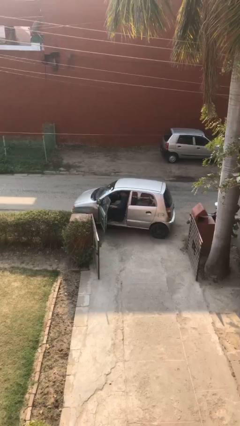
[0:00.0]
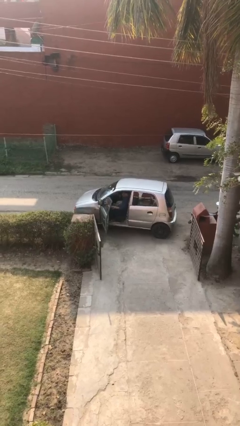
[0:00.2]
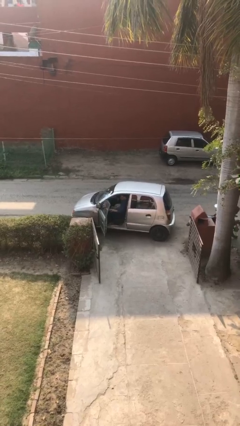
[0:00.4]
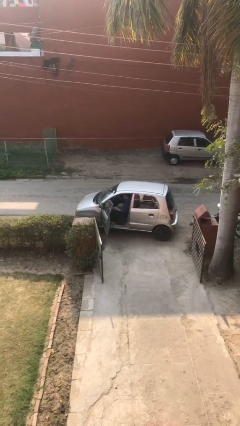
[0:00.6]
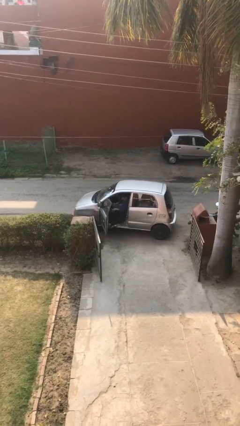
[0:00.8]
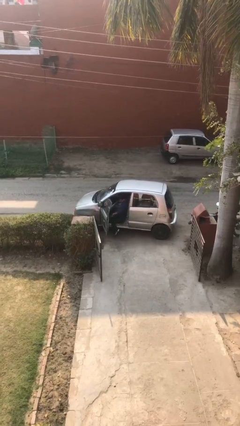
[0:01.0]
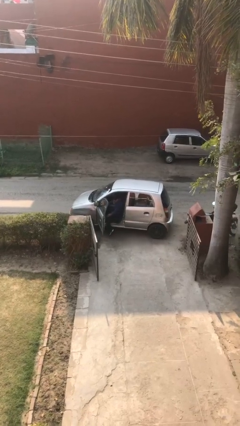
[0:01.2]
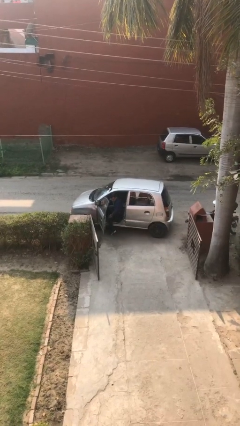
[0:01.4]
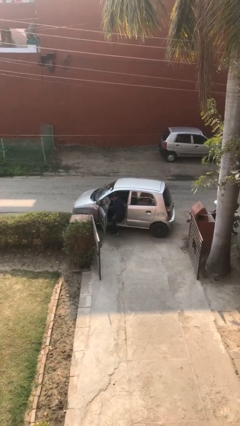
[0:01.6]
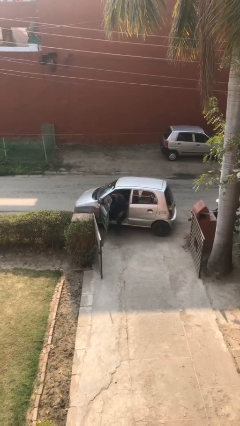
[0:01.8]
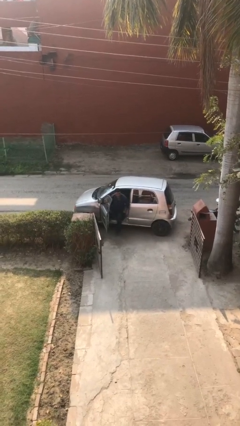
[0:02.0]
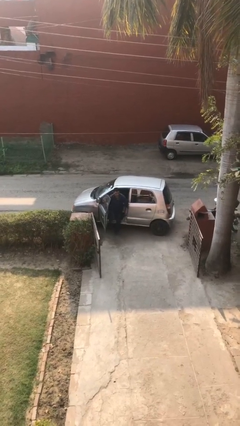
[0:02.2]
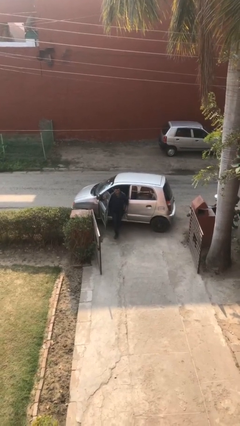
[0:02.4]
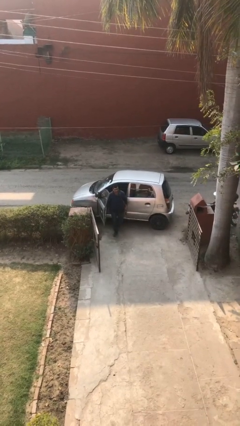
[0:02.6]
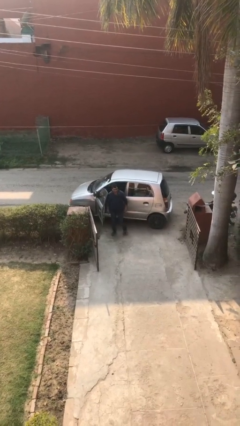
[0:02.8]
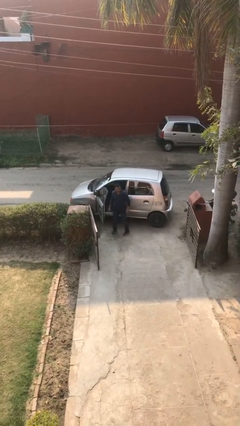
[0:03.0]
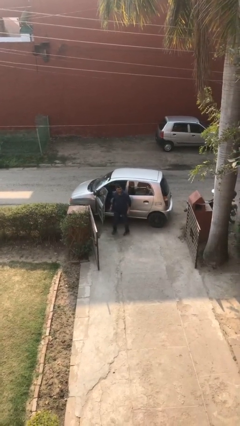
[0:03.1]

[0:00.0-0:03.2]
person exits car

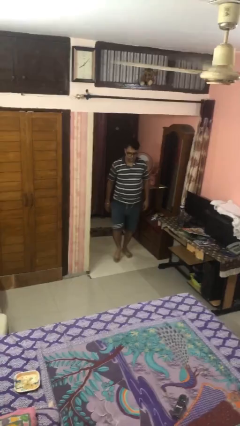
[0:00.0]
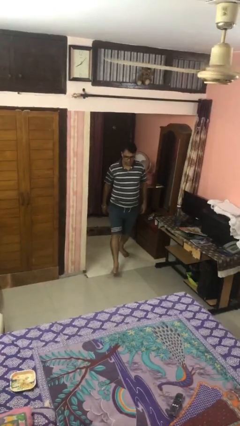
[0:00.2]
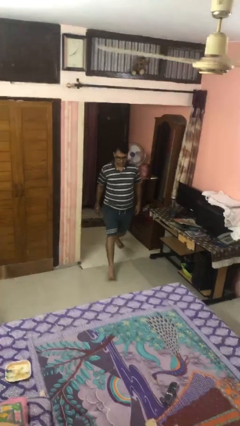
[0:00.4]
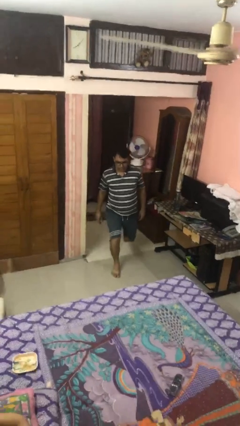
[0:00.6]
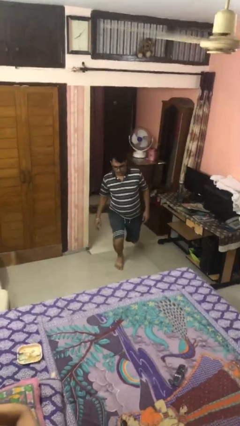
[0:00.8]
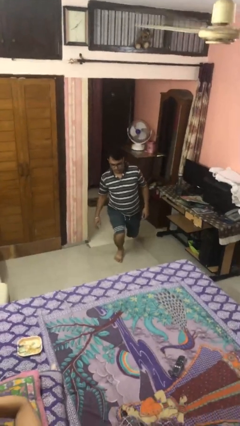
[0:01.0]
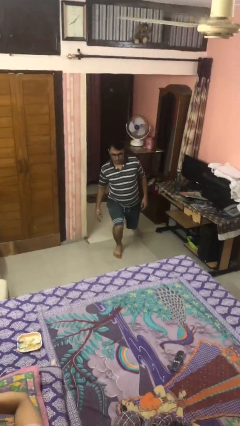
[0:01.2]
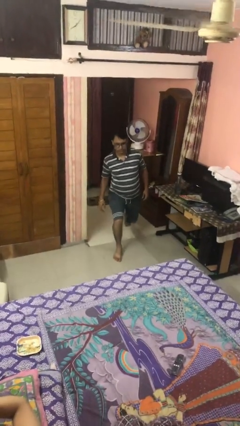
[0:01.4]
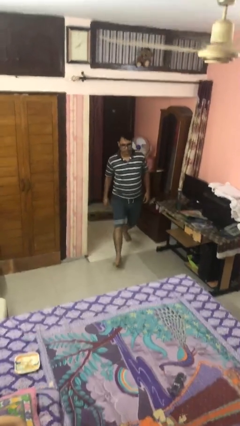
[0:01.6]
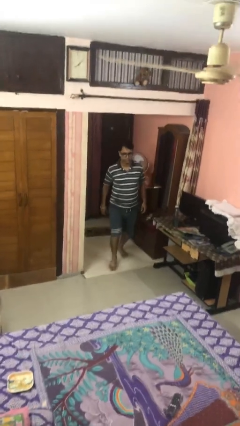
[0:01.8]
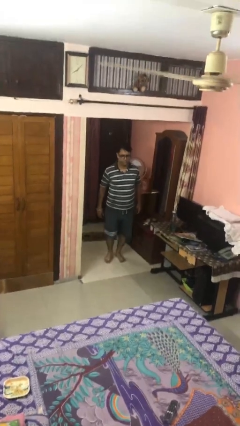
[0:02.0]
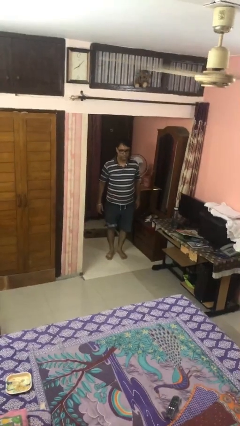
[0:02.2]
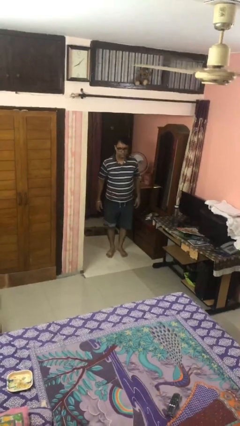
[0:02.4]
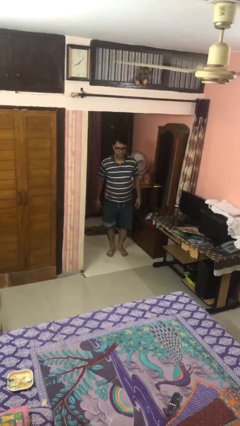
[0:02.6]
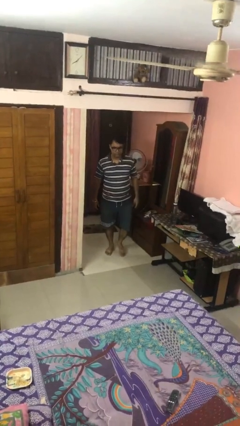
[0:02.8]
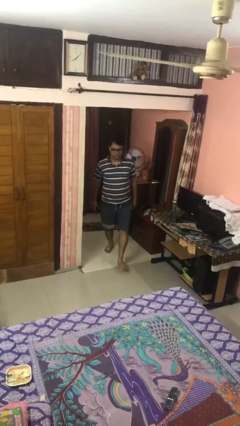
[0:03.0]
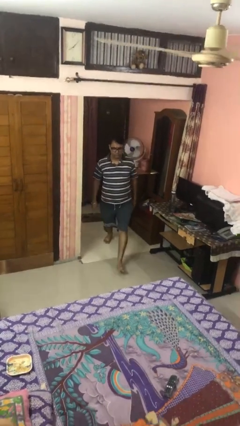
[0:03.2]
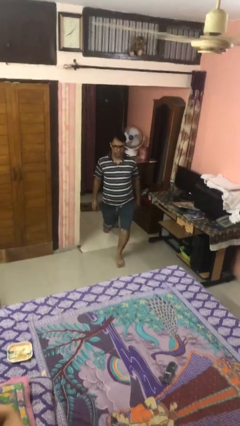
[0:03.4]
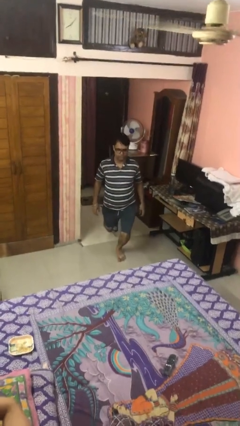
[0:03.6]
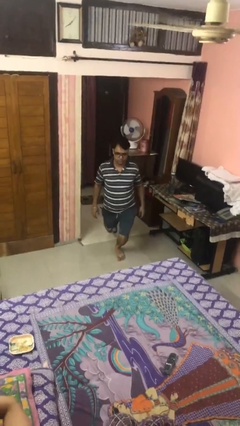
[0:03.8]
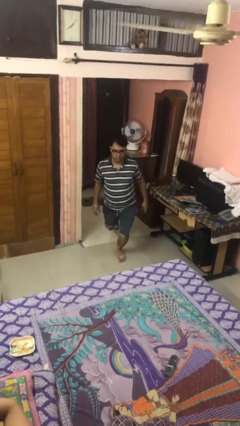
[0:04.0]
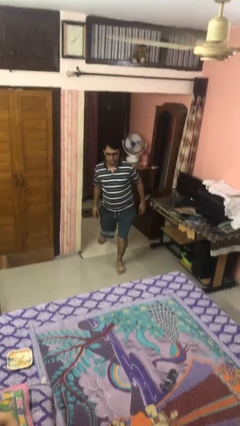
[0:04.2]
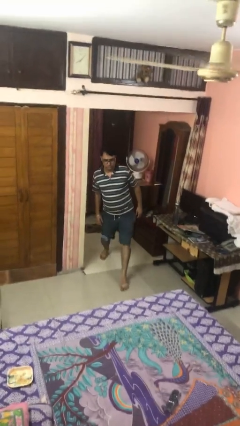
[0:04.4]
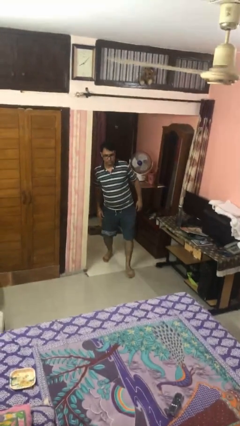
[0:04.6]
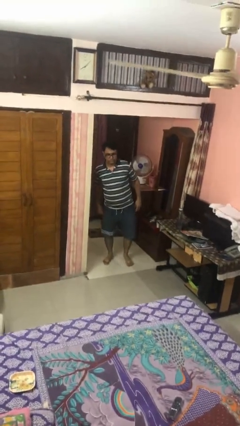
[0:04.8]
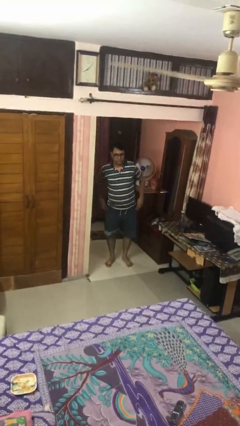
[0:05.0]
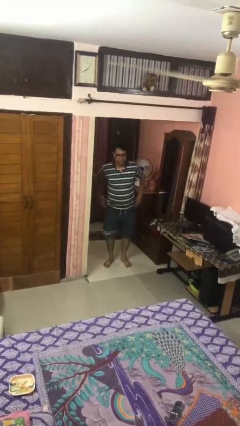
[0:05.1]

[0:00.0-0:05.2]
person exercises with lunges

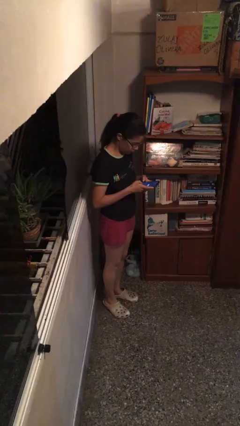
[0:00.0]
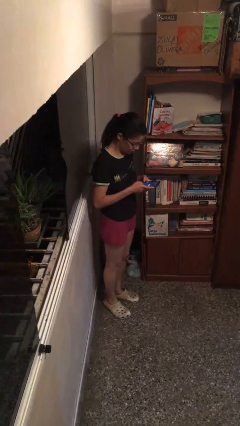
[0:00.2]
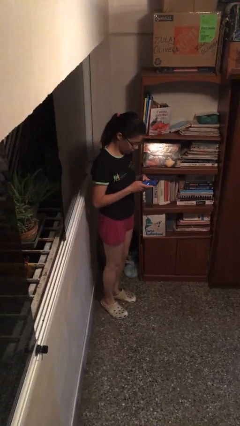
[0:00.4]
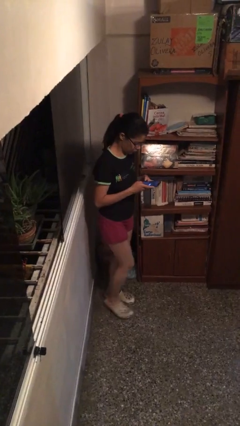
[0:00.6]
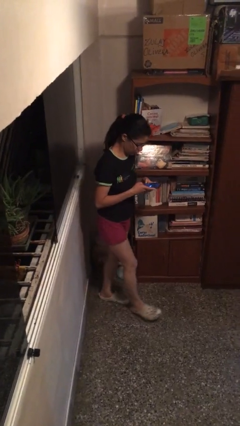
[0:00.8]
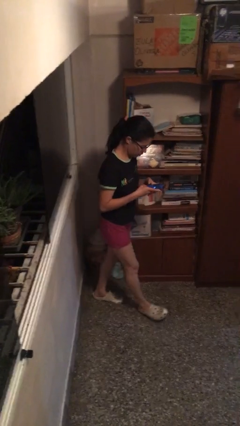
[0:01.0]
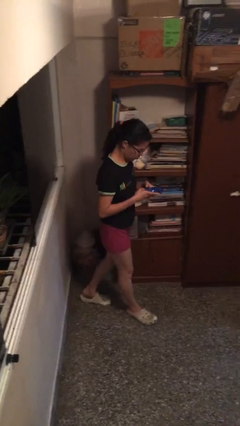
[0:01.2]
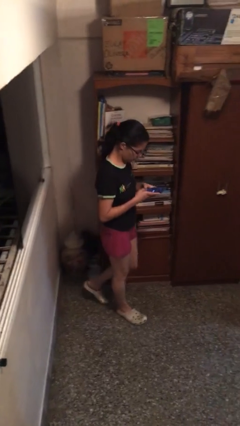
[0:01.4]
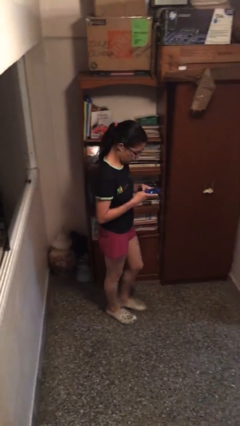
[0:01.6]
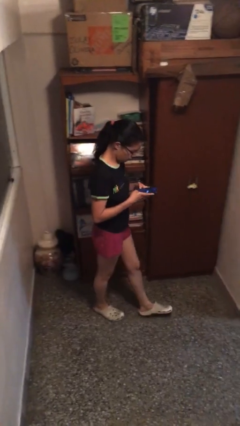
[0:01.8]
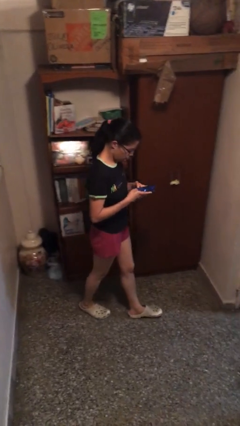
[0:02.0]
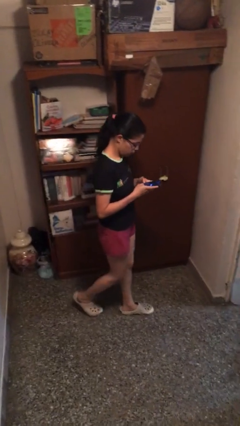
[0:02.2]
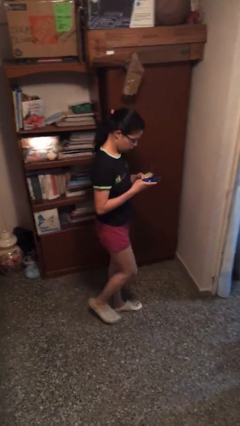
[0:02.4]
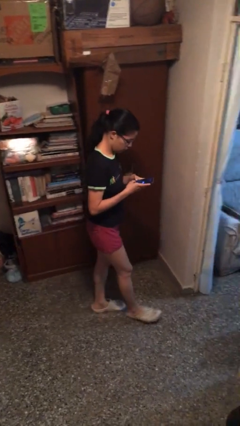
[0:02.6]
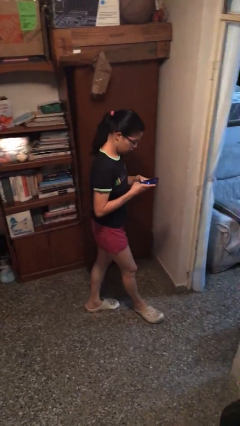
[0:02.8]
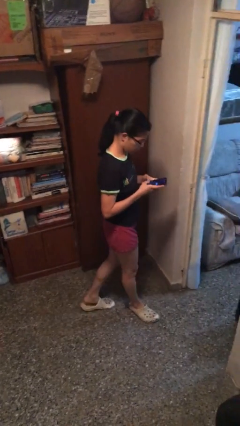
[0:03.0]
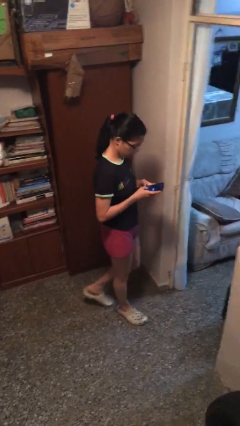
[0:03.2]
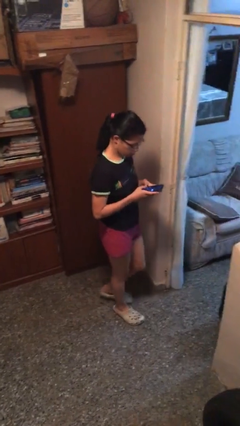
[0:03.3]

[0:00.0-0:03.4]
person texts on phone

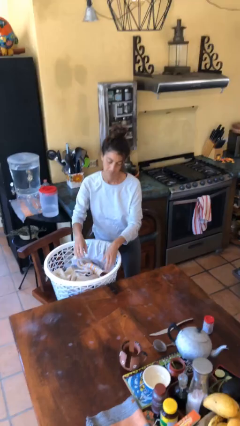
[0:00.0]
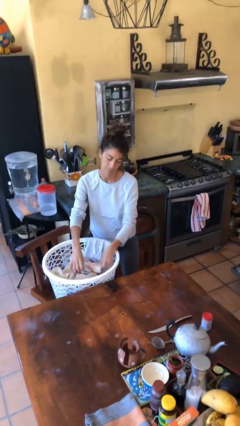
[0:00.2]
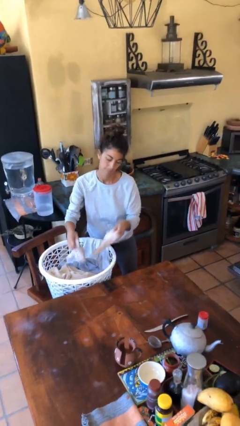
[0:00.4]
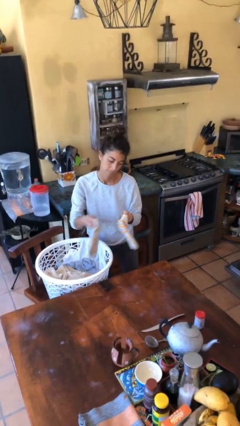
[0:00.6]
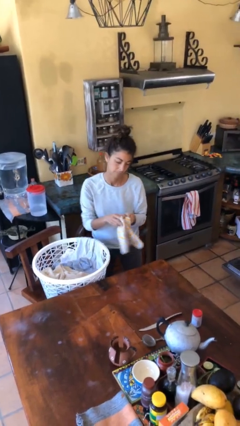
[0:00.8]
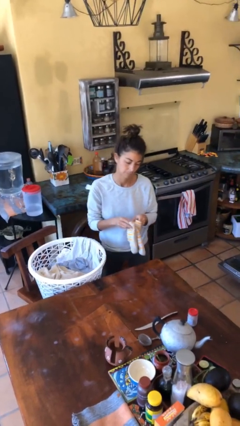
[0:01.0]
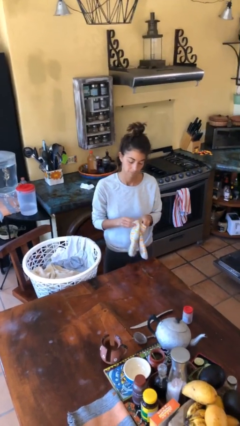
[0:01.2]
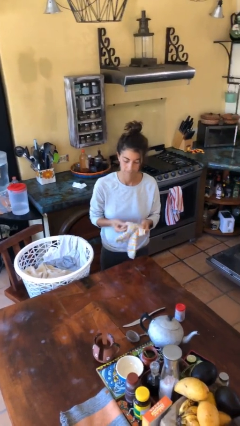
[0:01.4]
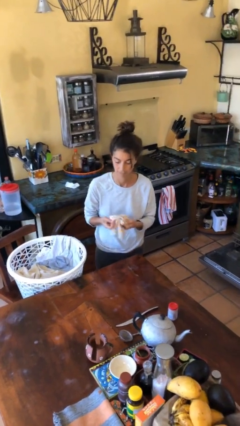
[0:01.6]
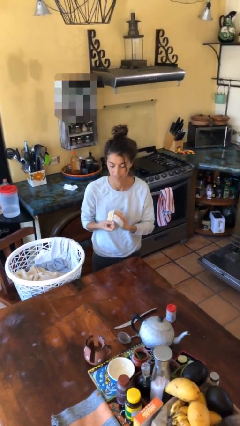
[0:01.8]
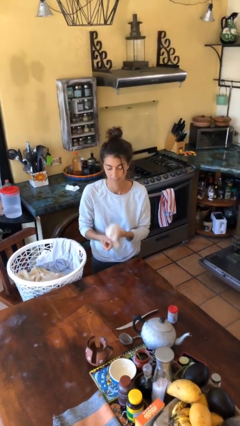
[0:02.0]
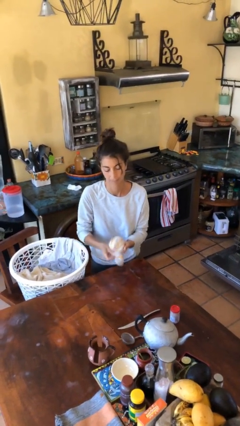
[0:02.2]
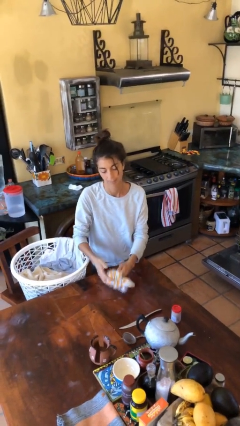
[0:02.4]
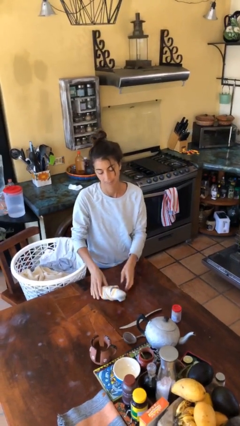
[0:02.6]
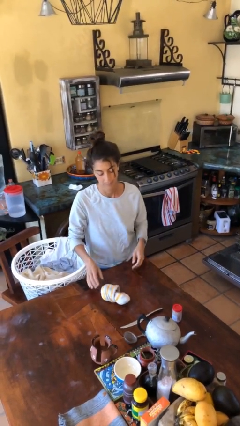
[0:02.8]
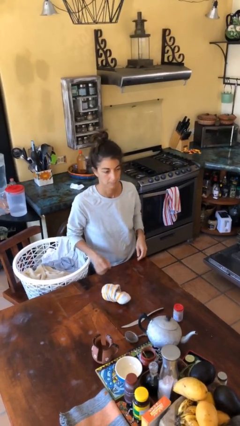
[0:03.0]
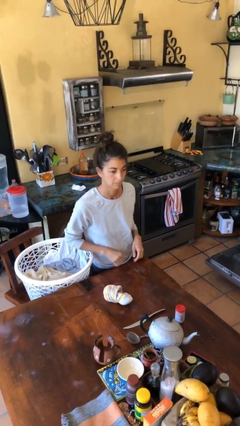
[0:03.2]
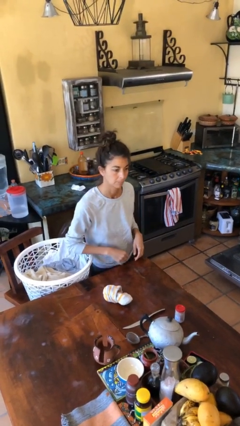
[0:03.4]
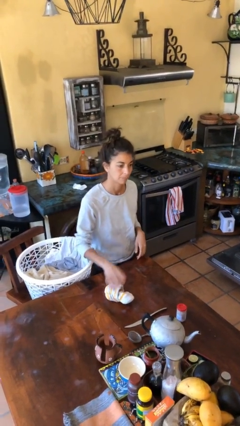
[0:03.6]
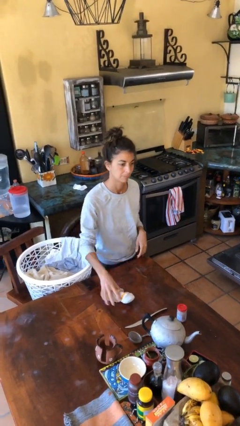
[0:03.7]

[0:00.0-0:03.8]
person folds socks

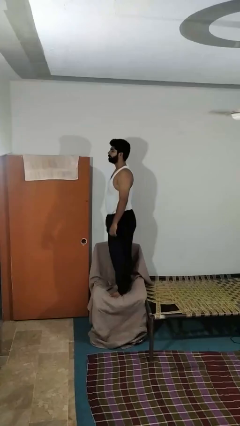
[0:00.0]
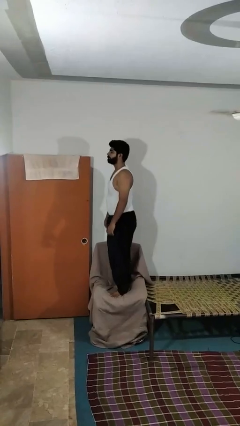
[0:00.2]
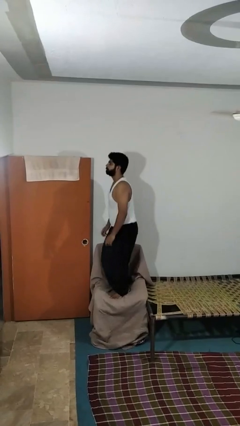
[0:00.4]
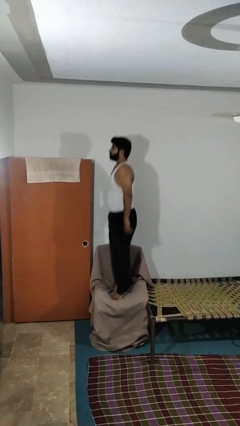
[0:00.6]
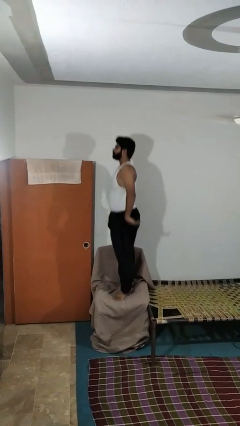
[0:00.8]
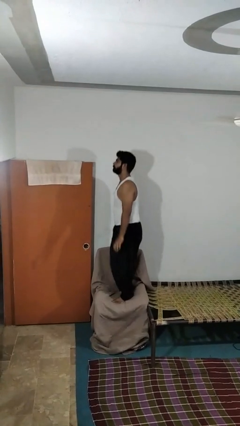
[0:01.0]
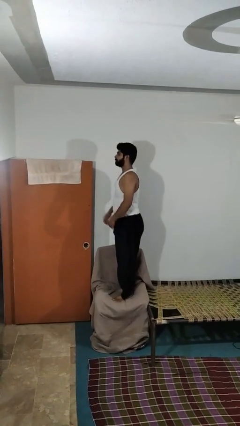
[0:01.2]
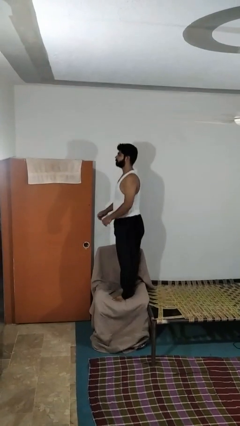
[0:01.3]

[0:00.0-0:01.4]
person jumps on couch

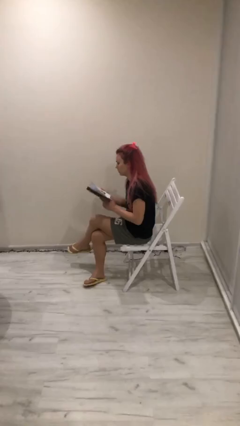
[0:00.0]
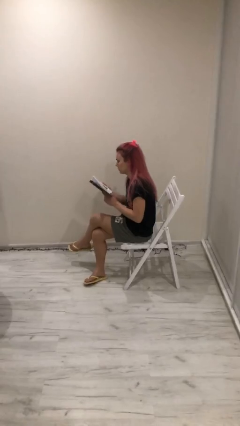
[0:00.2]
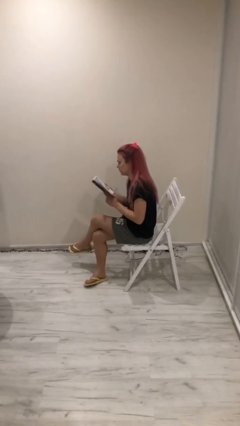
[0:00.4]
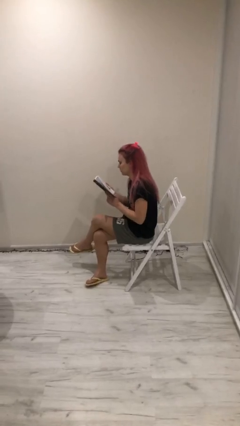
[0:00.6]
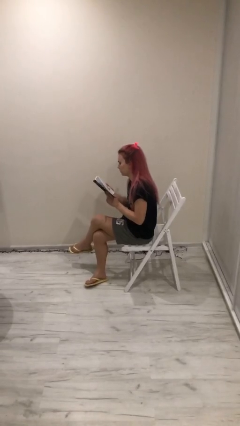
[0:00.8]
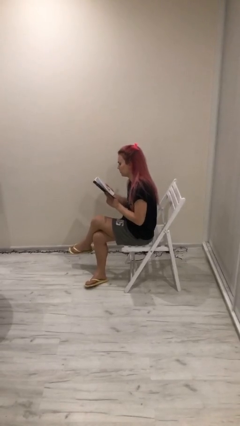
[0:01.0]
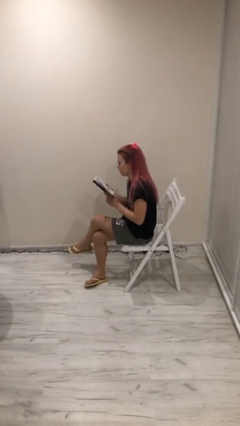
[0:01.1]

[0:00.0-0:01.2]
person reads document
